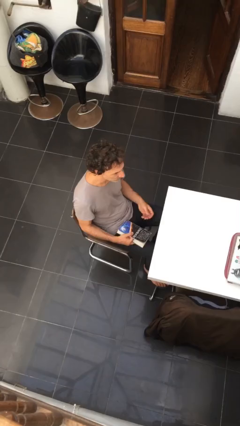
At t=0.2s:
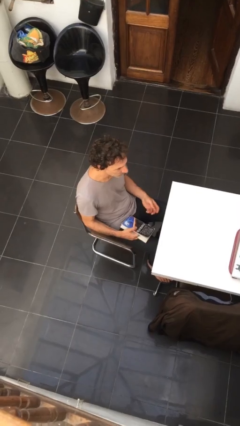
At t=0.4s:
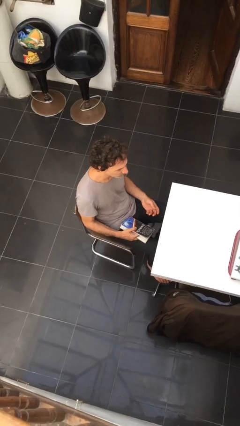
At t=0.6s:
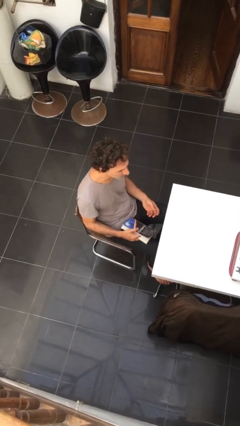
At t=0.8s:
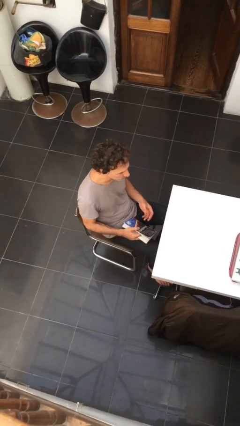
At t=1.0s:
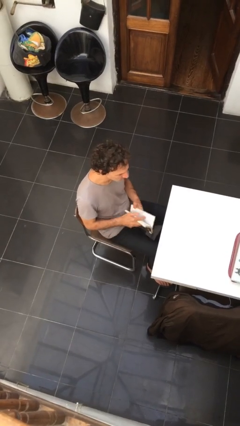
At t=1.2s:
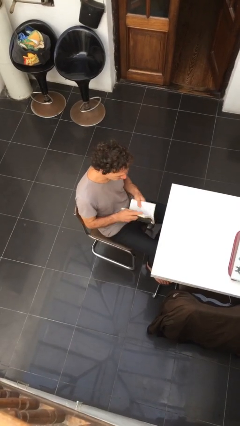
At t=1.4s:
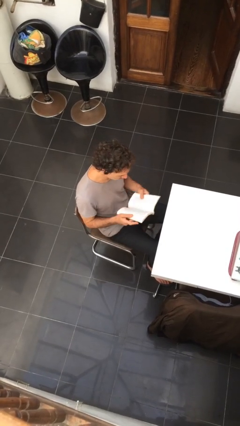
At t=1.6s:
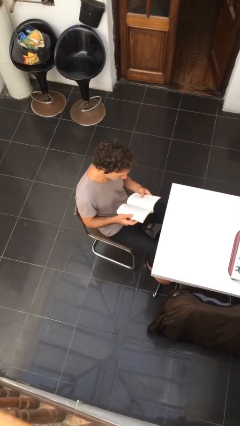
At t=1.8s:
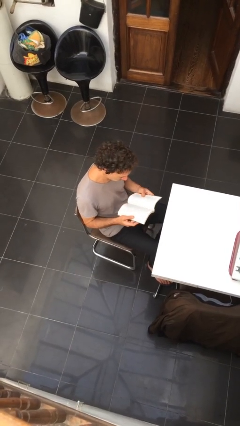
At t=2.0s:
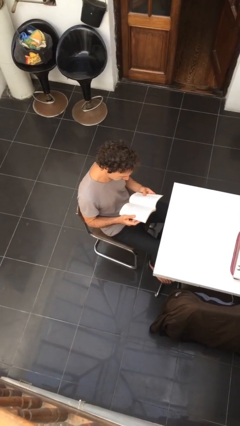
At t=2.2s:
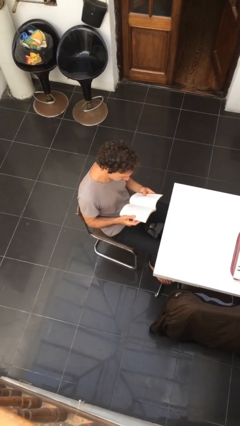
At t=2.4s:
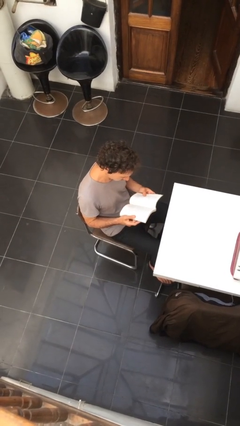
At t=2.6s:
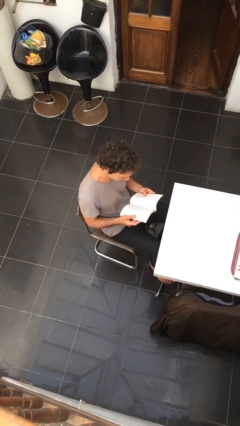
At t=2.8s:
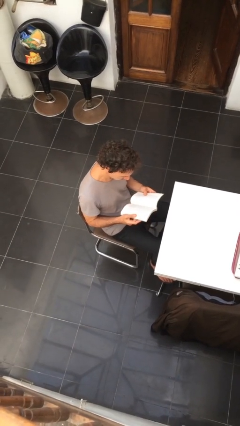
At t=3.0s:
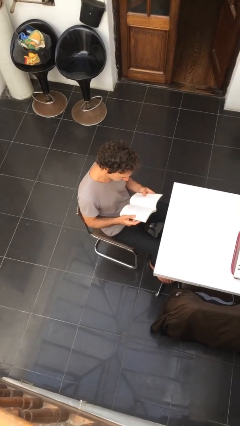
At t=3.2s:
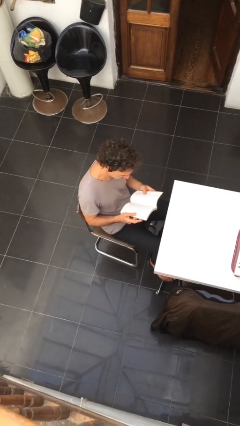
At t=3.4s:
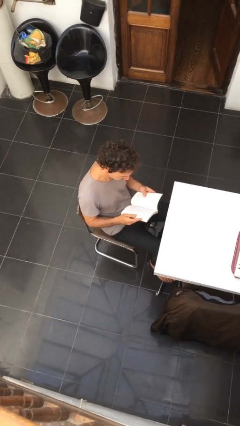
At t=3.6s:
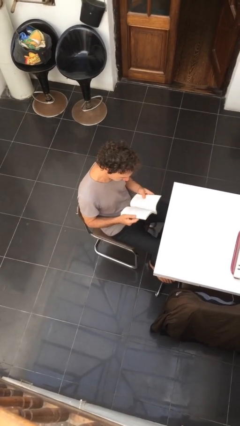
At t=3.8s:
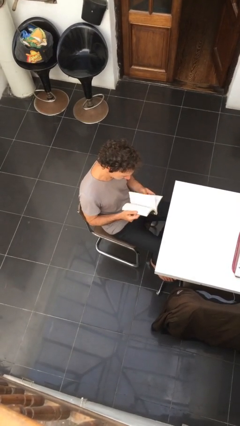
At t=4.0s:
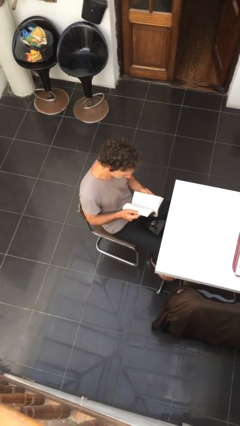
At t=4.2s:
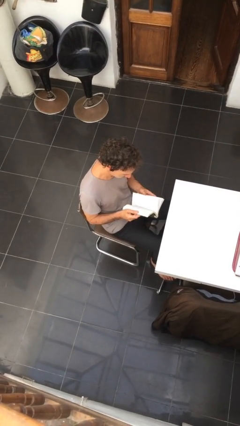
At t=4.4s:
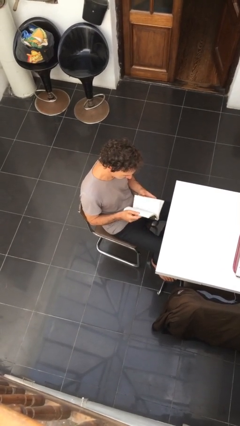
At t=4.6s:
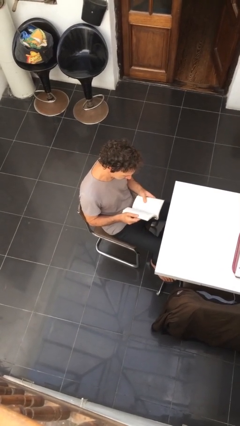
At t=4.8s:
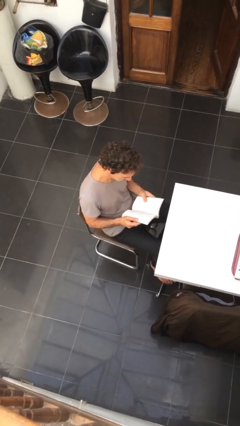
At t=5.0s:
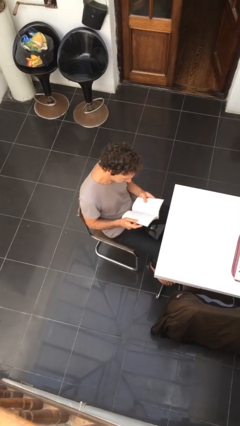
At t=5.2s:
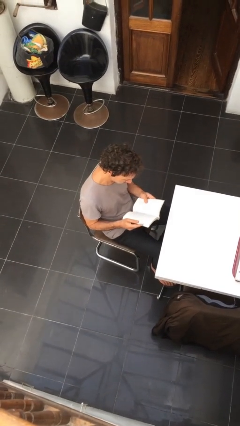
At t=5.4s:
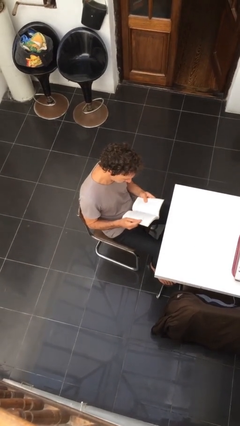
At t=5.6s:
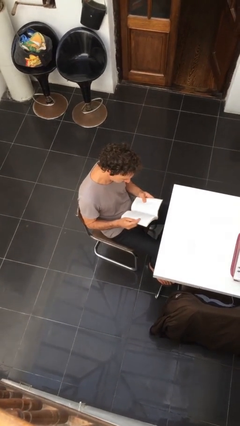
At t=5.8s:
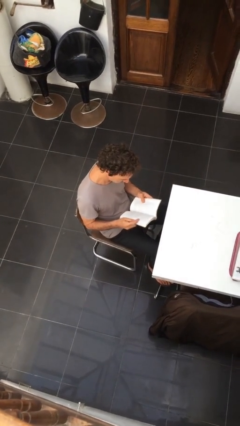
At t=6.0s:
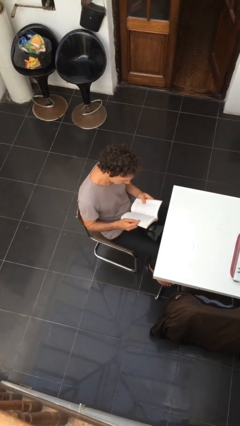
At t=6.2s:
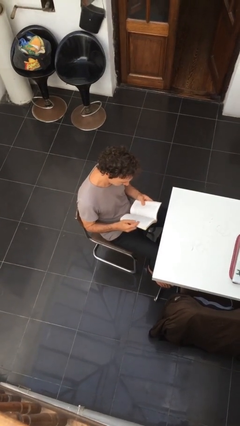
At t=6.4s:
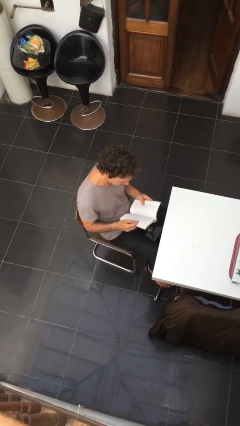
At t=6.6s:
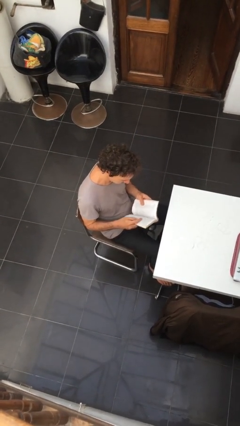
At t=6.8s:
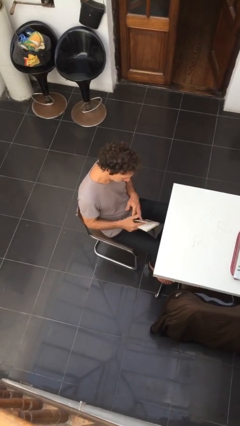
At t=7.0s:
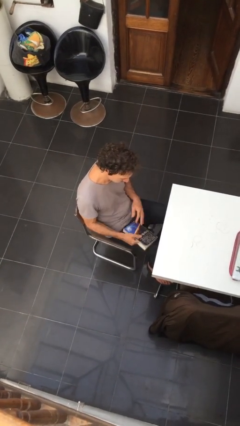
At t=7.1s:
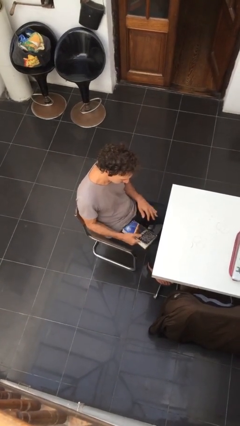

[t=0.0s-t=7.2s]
person reads document

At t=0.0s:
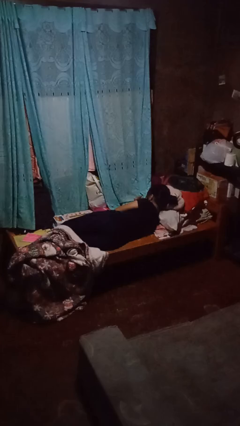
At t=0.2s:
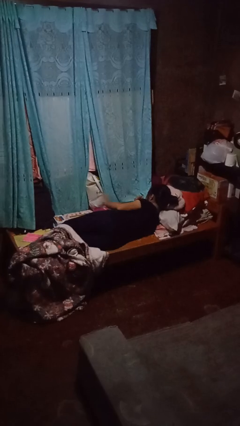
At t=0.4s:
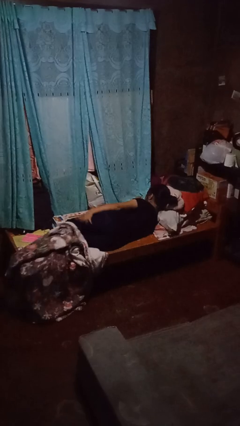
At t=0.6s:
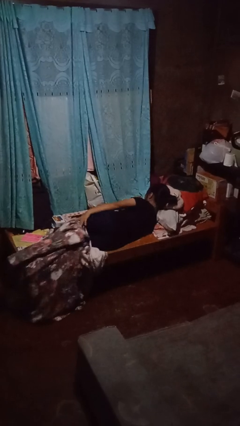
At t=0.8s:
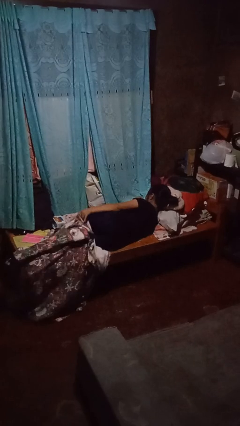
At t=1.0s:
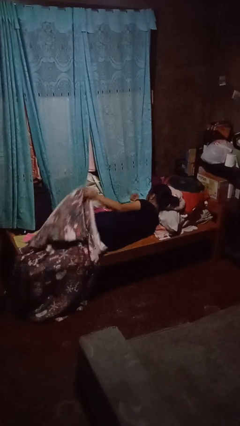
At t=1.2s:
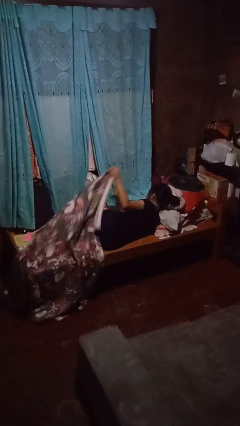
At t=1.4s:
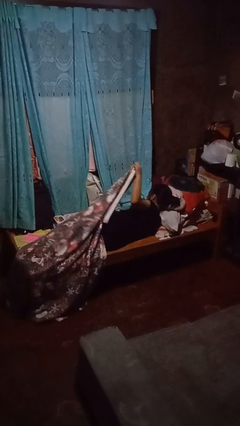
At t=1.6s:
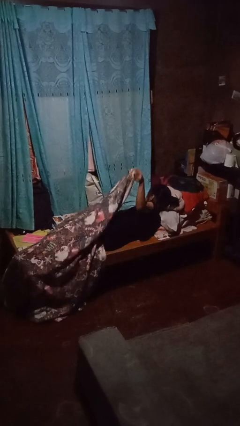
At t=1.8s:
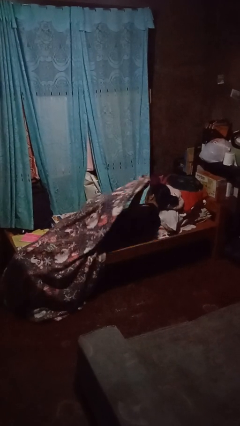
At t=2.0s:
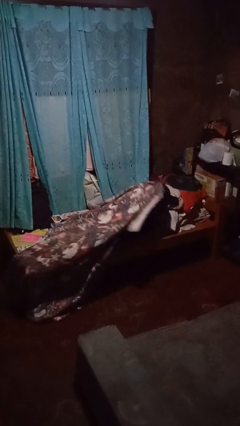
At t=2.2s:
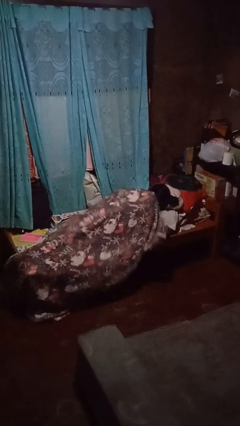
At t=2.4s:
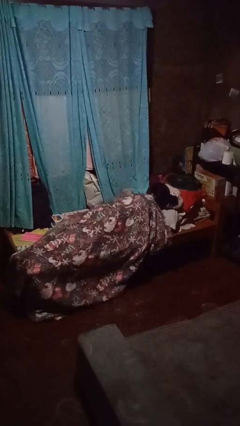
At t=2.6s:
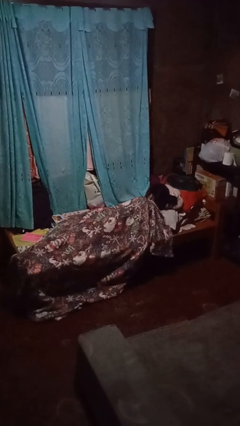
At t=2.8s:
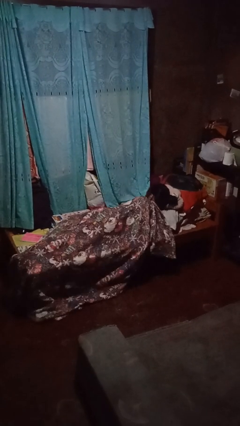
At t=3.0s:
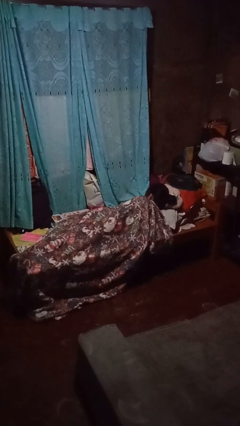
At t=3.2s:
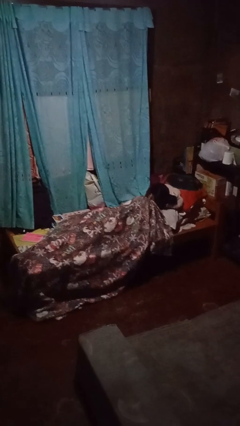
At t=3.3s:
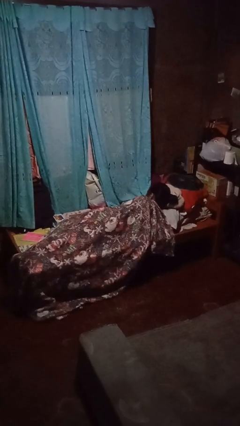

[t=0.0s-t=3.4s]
person covers with bedsheets

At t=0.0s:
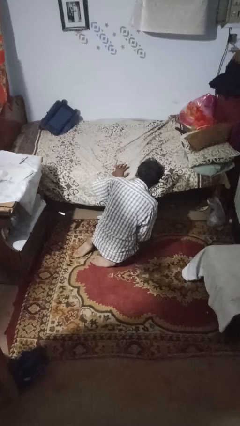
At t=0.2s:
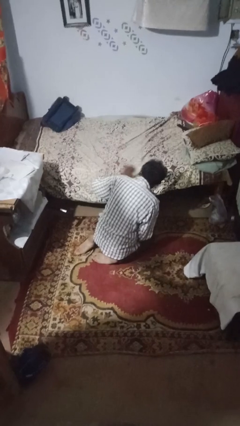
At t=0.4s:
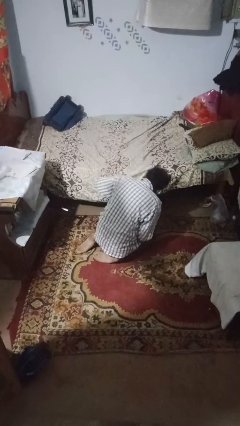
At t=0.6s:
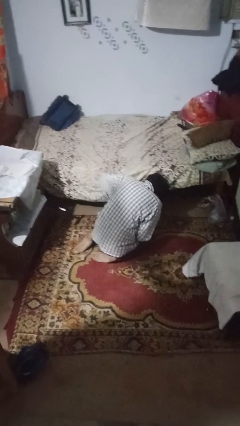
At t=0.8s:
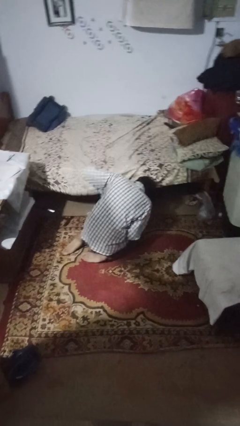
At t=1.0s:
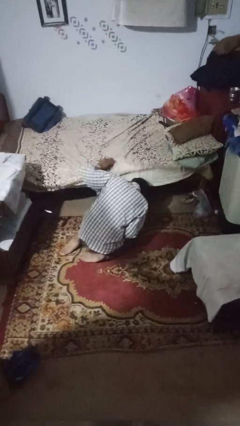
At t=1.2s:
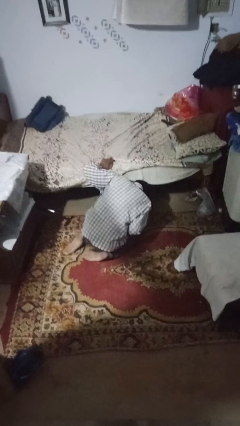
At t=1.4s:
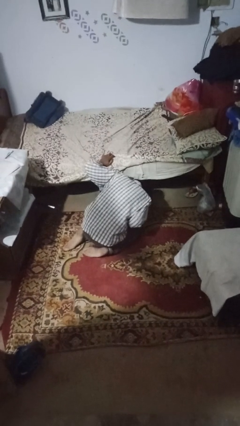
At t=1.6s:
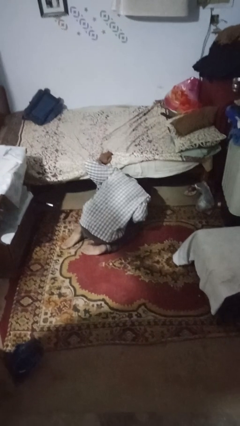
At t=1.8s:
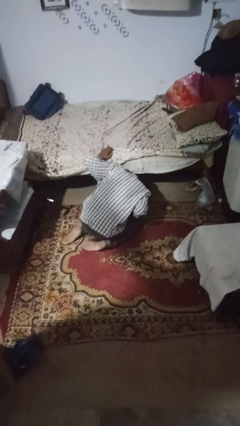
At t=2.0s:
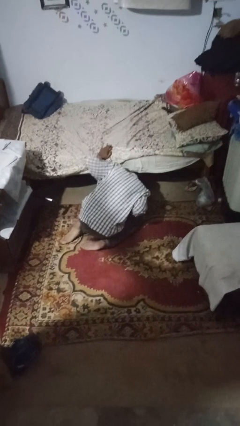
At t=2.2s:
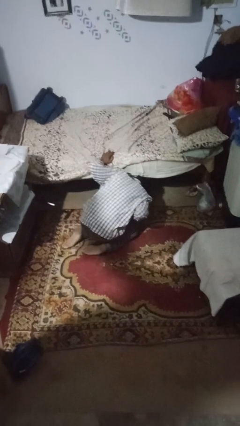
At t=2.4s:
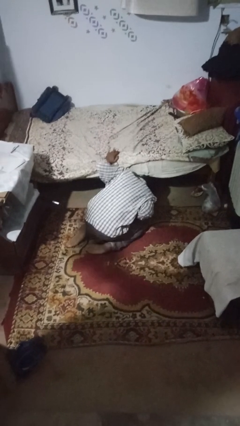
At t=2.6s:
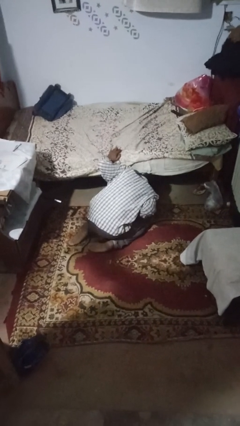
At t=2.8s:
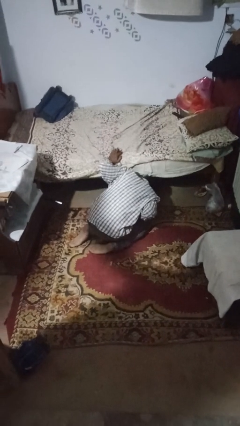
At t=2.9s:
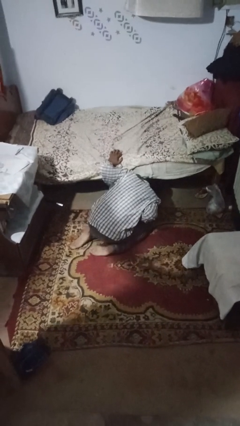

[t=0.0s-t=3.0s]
person searches under bed

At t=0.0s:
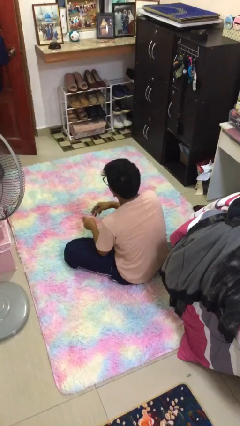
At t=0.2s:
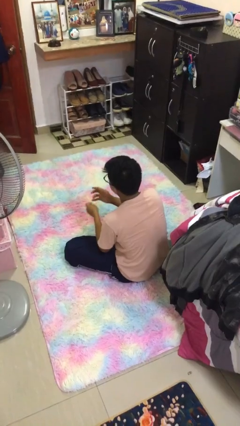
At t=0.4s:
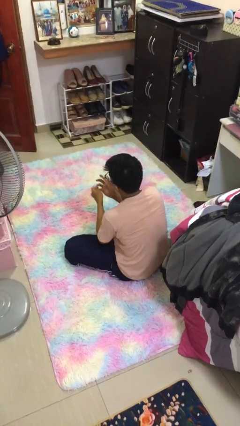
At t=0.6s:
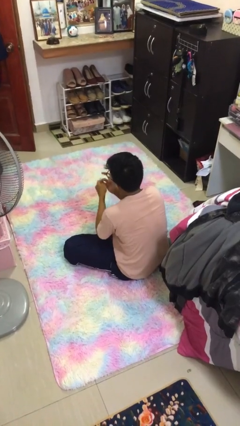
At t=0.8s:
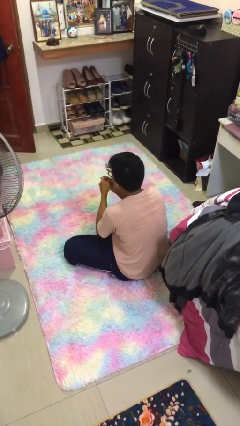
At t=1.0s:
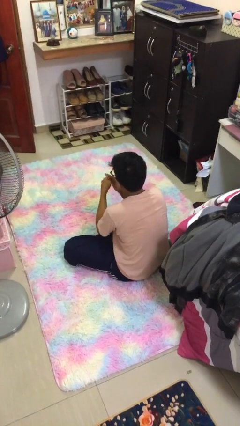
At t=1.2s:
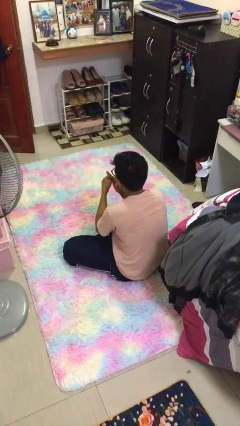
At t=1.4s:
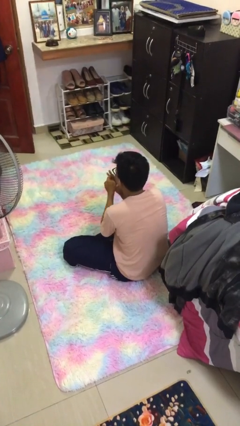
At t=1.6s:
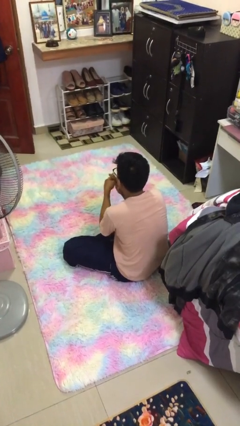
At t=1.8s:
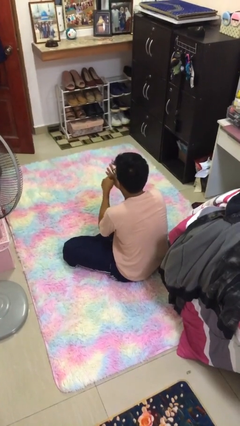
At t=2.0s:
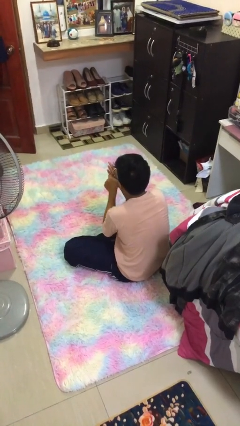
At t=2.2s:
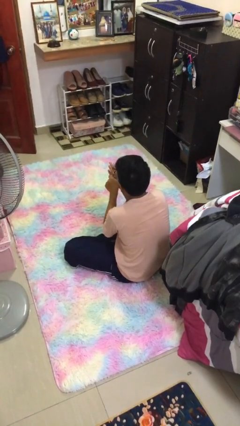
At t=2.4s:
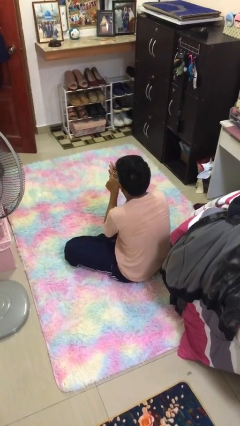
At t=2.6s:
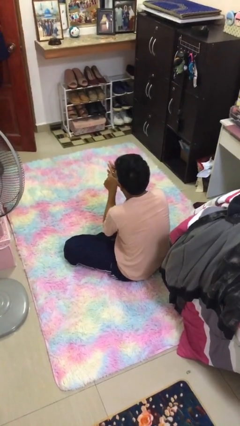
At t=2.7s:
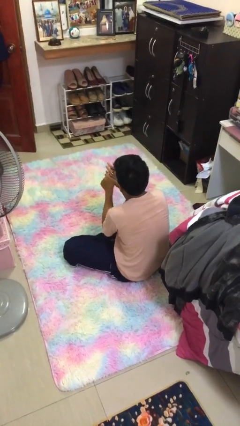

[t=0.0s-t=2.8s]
person puts on ring

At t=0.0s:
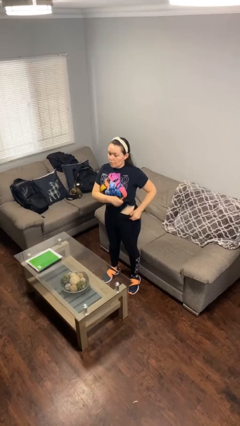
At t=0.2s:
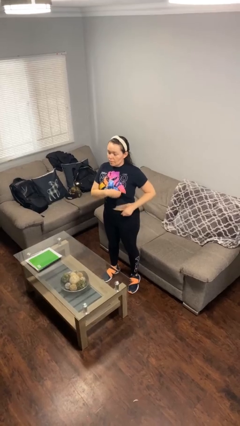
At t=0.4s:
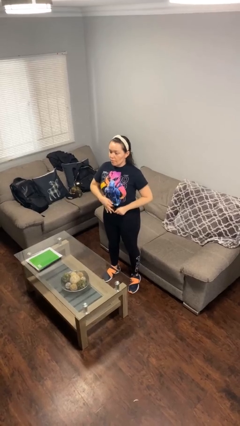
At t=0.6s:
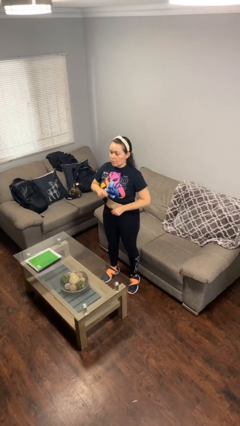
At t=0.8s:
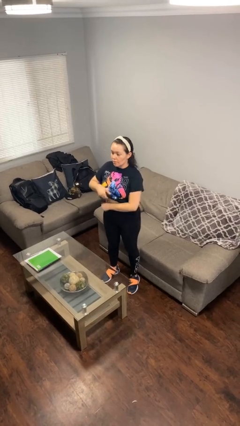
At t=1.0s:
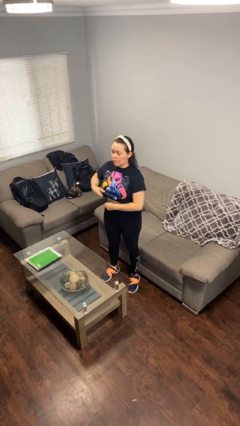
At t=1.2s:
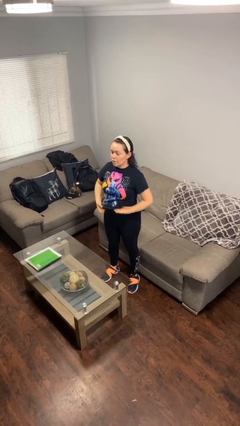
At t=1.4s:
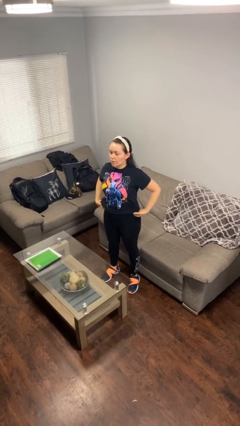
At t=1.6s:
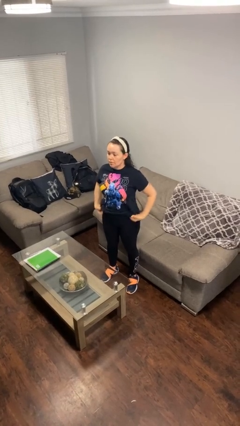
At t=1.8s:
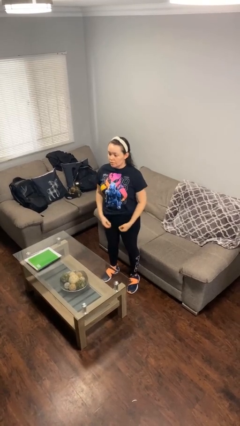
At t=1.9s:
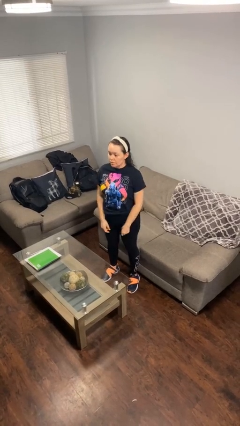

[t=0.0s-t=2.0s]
person untucks shirt
